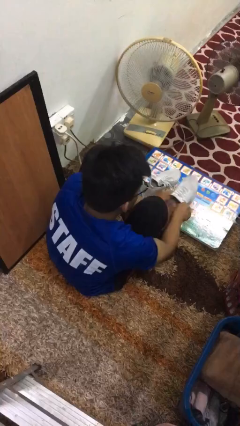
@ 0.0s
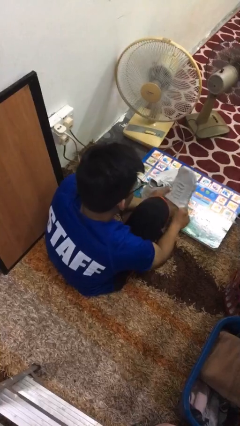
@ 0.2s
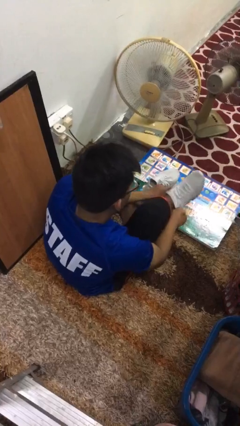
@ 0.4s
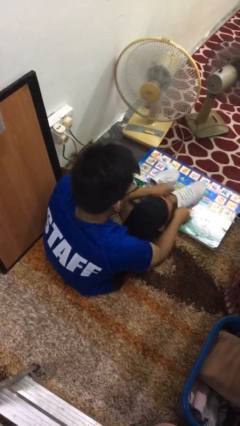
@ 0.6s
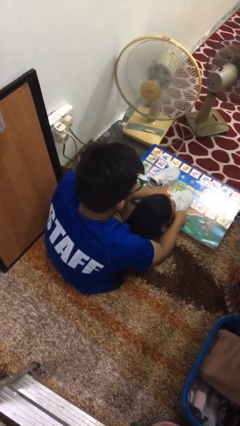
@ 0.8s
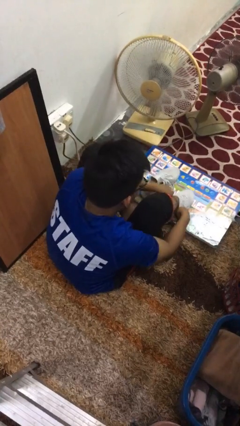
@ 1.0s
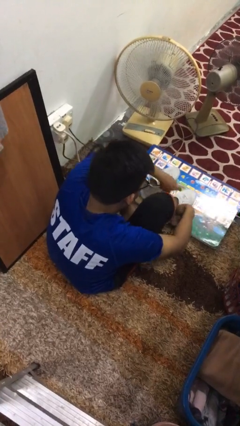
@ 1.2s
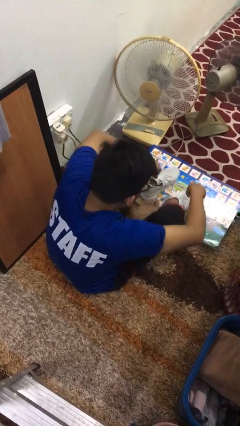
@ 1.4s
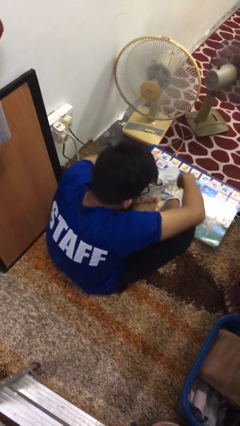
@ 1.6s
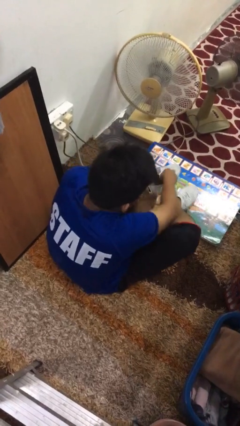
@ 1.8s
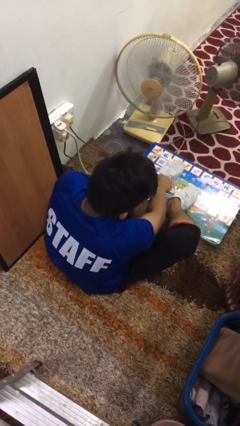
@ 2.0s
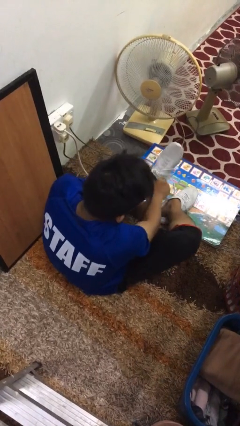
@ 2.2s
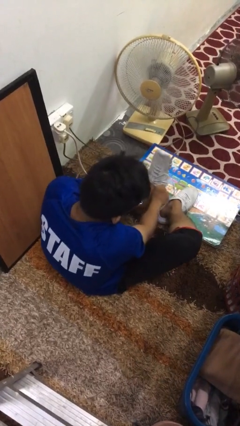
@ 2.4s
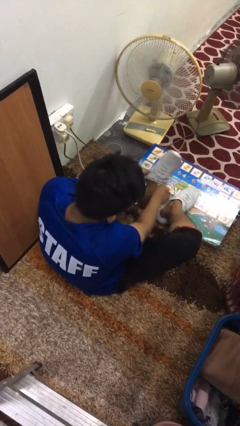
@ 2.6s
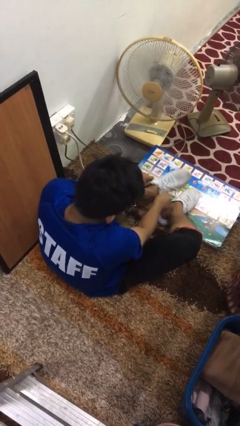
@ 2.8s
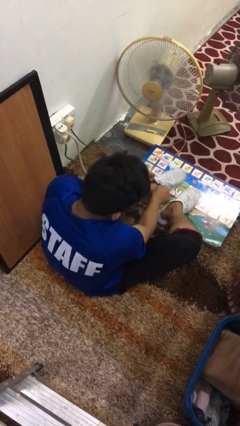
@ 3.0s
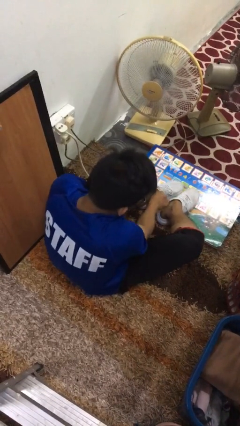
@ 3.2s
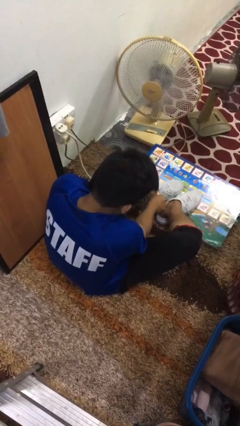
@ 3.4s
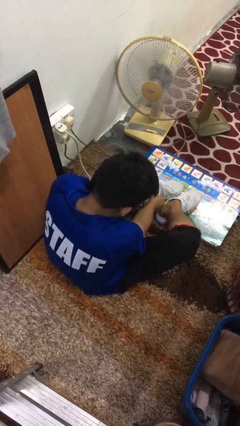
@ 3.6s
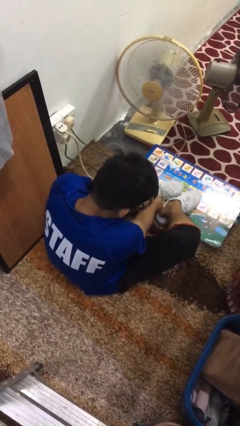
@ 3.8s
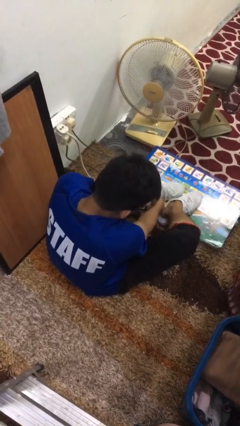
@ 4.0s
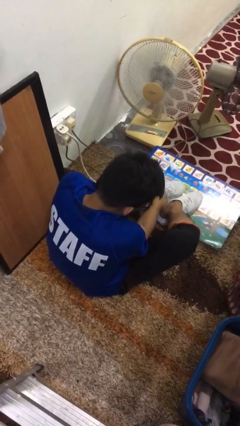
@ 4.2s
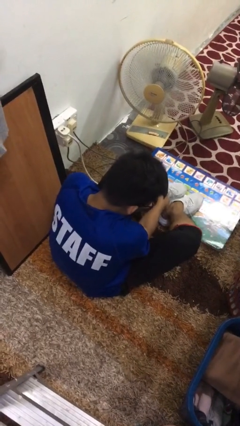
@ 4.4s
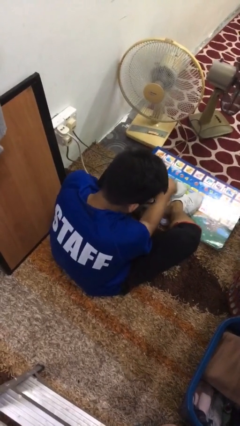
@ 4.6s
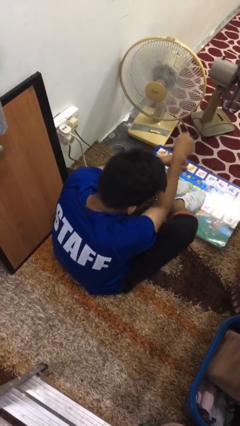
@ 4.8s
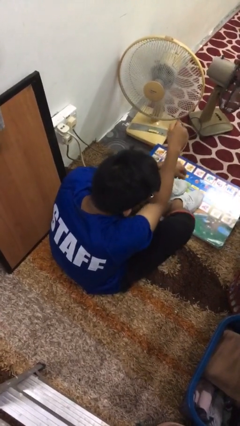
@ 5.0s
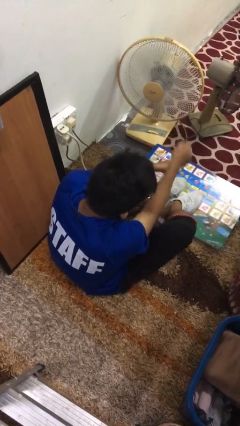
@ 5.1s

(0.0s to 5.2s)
person puts on shoes

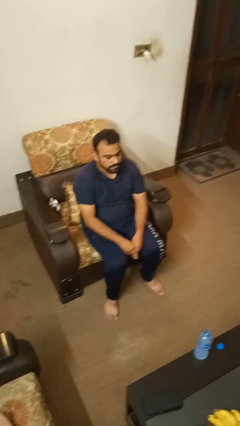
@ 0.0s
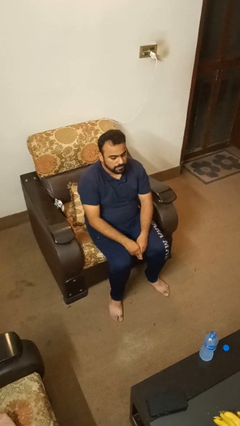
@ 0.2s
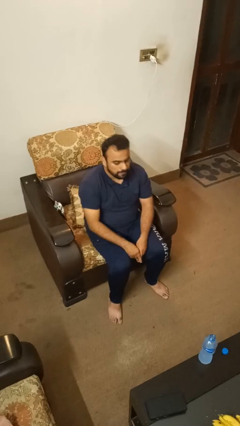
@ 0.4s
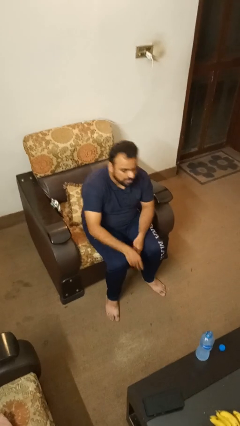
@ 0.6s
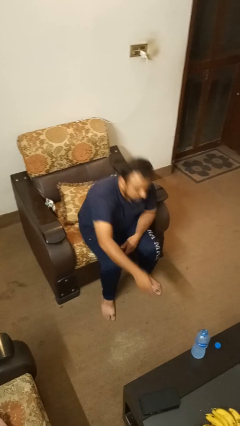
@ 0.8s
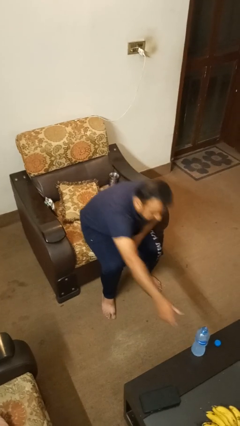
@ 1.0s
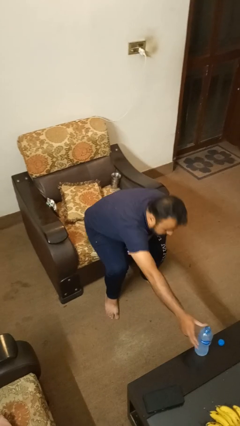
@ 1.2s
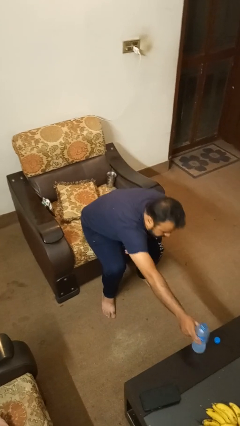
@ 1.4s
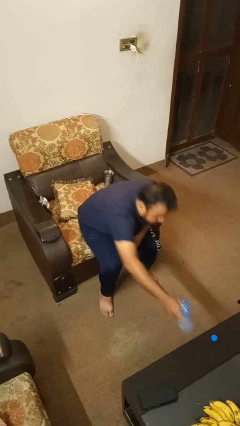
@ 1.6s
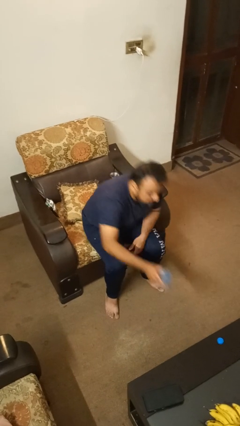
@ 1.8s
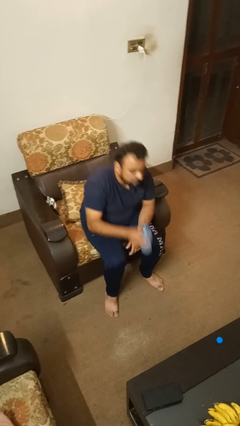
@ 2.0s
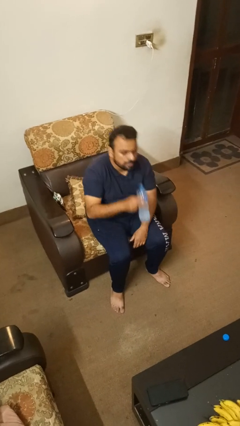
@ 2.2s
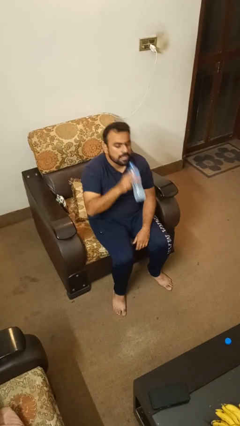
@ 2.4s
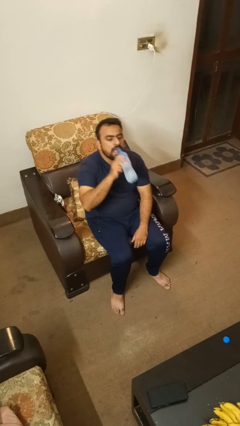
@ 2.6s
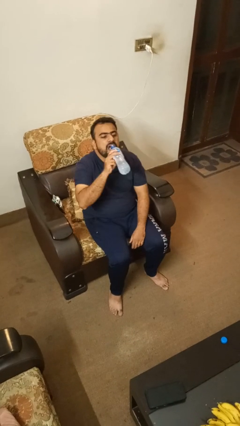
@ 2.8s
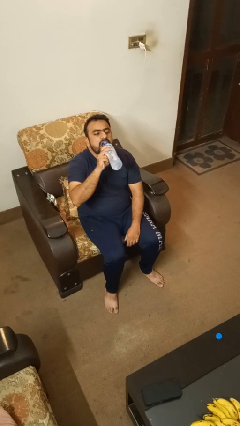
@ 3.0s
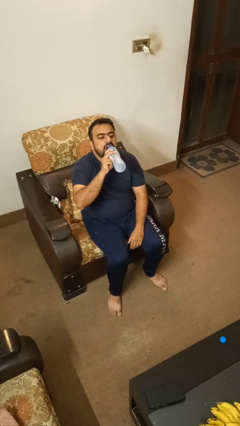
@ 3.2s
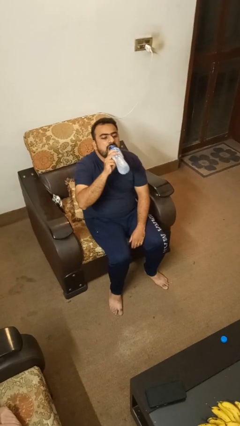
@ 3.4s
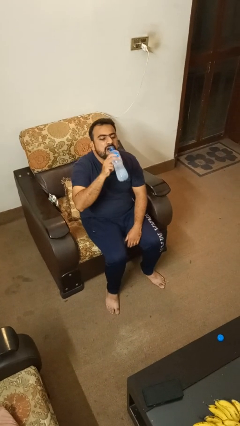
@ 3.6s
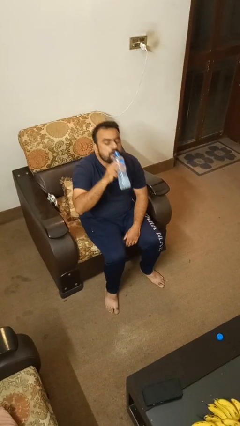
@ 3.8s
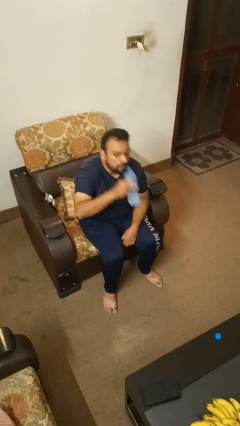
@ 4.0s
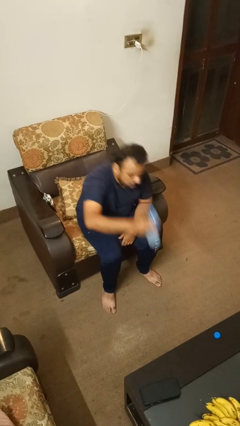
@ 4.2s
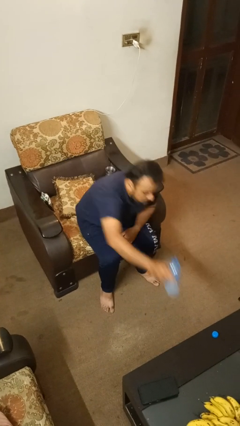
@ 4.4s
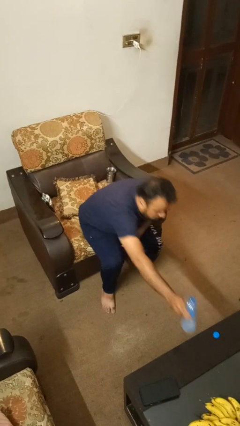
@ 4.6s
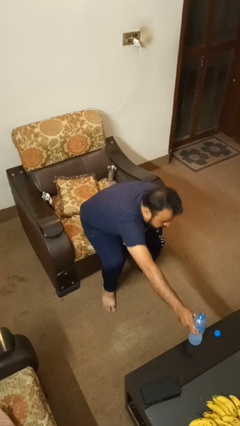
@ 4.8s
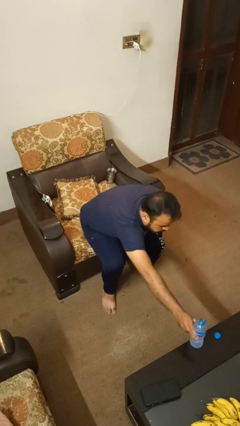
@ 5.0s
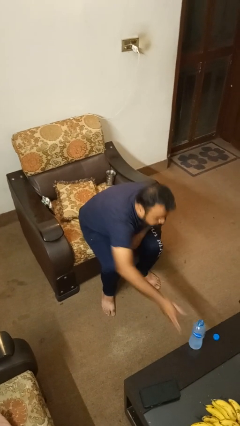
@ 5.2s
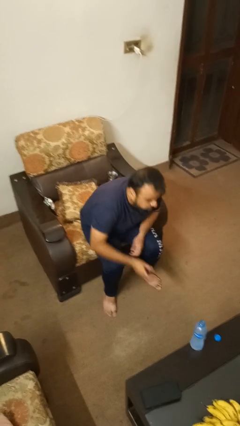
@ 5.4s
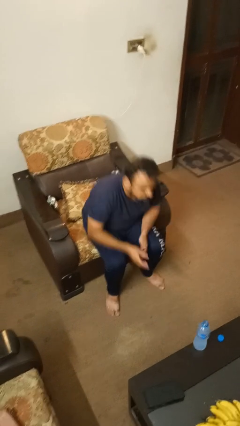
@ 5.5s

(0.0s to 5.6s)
person drinks from bottle

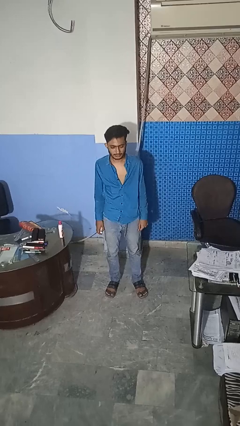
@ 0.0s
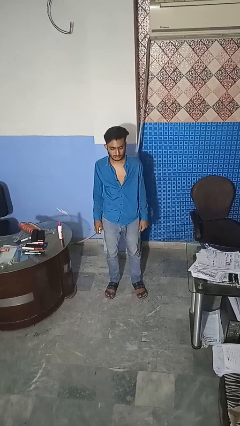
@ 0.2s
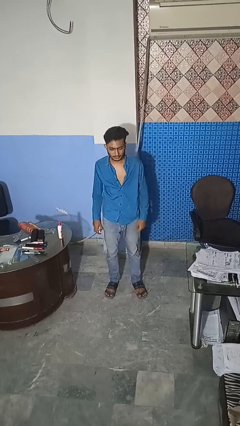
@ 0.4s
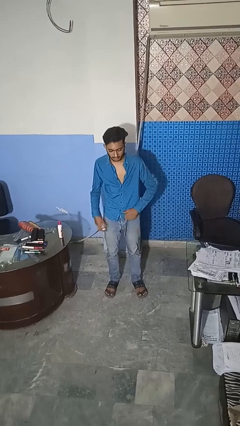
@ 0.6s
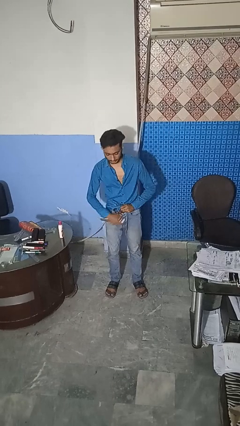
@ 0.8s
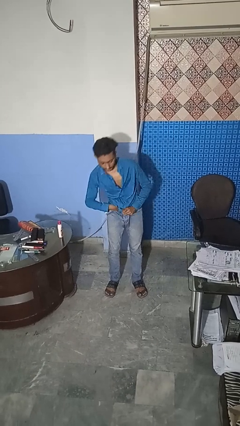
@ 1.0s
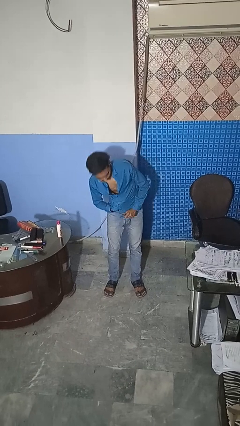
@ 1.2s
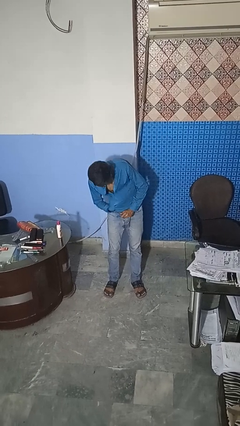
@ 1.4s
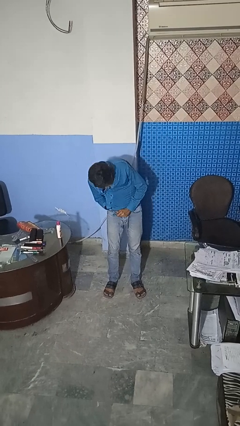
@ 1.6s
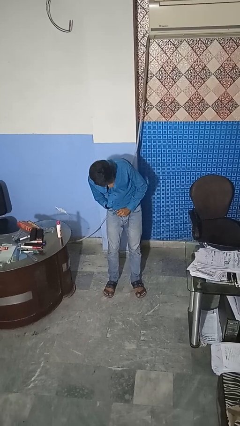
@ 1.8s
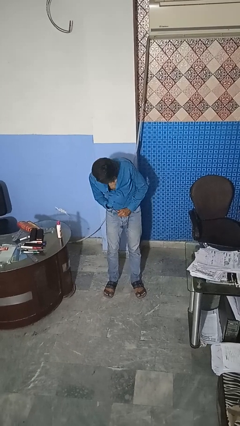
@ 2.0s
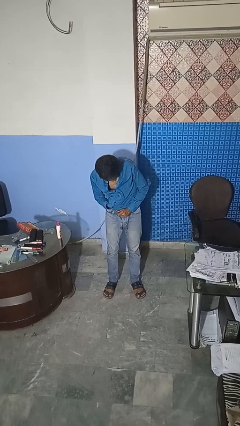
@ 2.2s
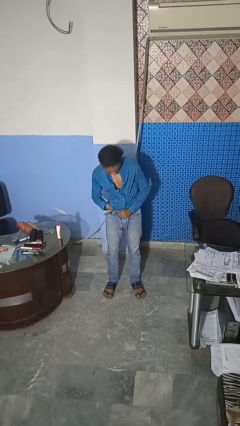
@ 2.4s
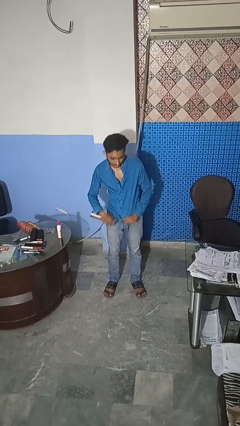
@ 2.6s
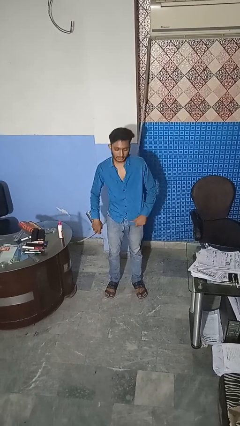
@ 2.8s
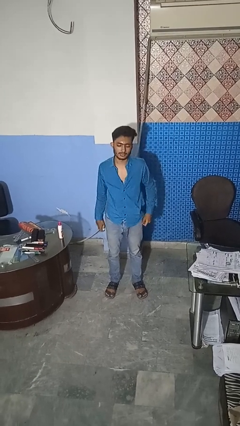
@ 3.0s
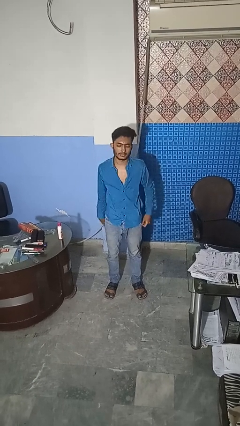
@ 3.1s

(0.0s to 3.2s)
person applies deodorant

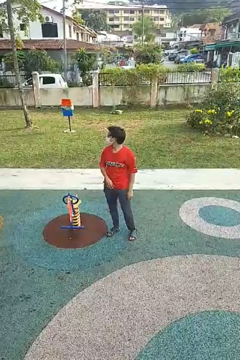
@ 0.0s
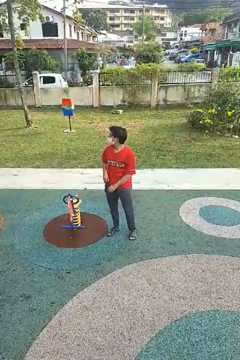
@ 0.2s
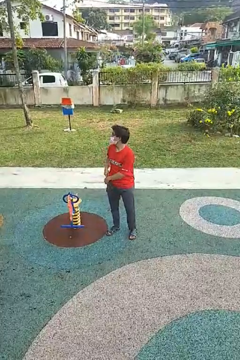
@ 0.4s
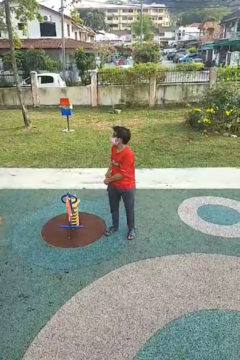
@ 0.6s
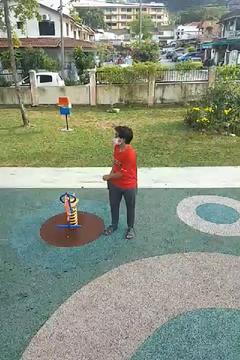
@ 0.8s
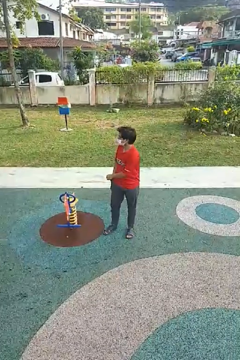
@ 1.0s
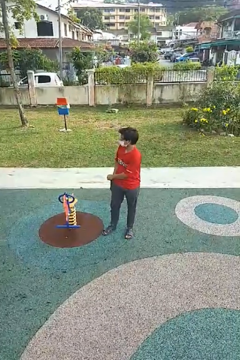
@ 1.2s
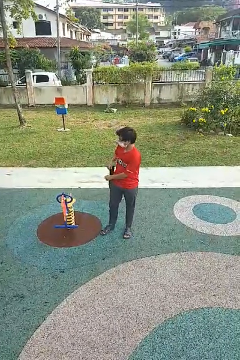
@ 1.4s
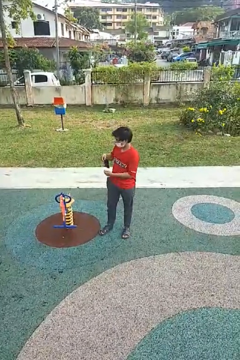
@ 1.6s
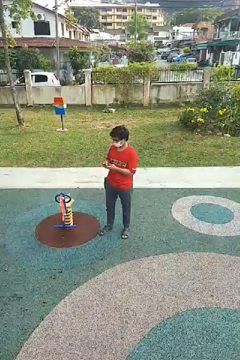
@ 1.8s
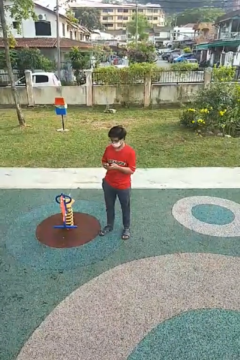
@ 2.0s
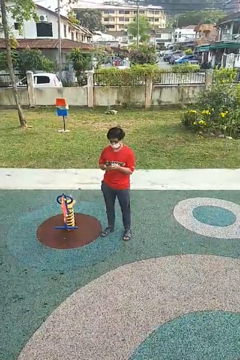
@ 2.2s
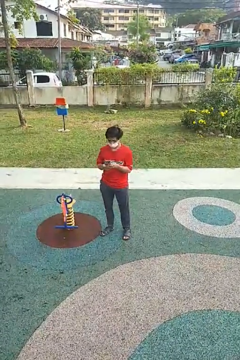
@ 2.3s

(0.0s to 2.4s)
person takes phone from pocket

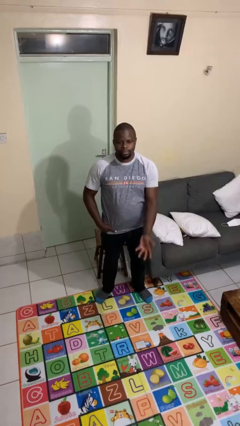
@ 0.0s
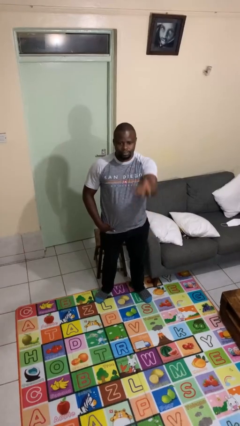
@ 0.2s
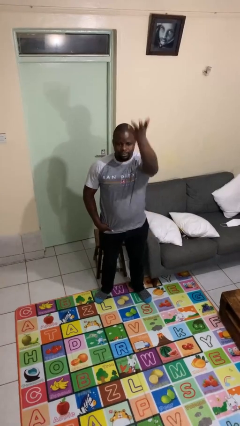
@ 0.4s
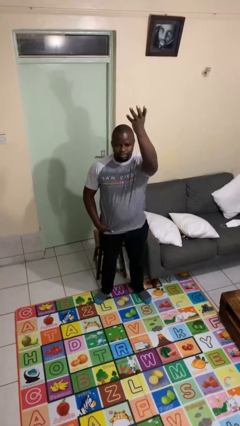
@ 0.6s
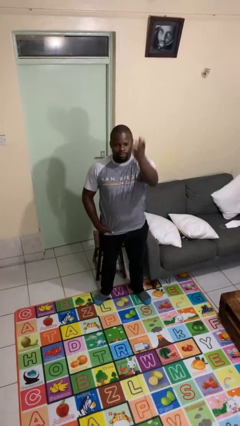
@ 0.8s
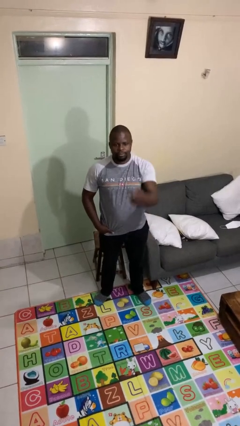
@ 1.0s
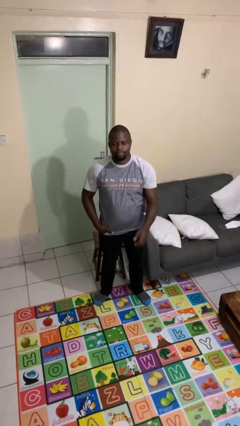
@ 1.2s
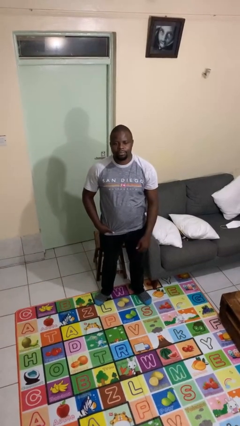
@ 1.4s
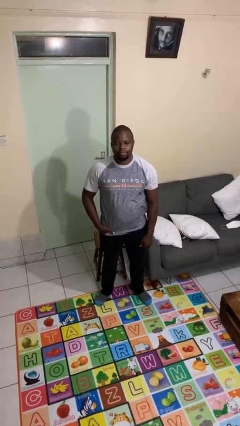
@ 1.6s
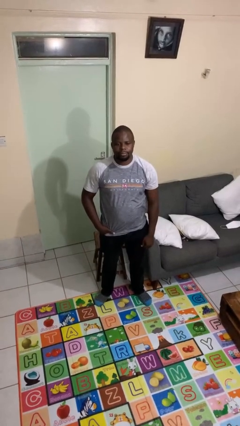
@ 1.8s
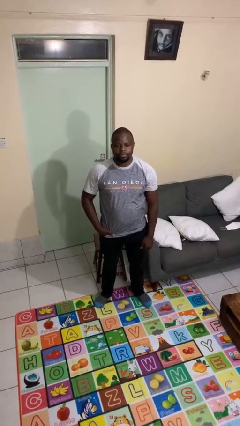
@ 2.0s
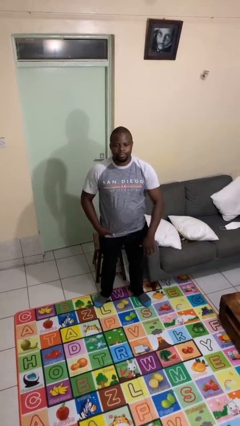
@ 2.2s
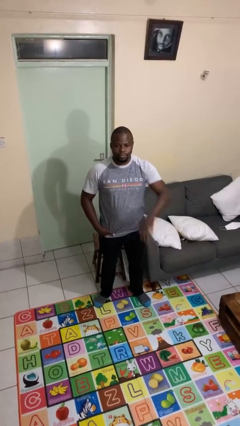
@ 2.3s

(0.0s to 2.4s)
person gestures swipe up
